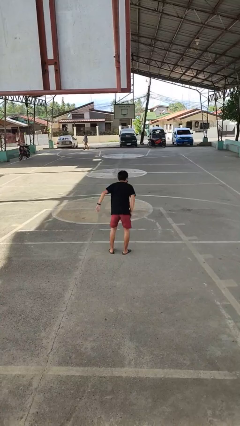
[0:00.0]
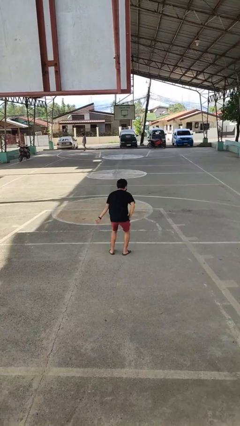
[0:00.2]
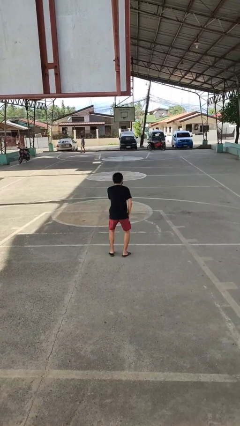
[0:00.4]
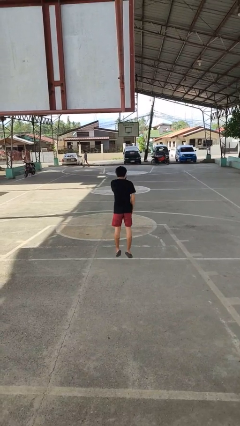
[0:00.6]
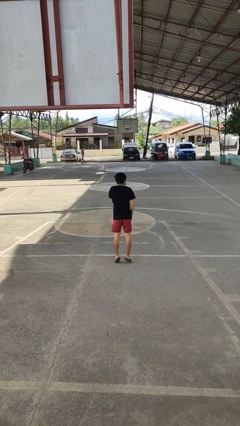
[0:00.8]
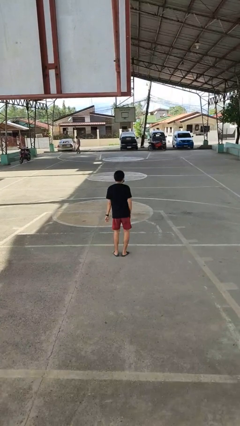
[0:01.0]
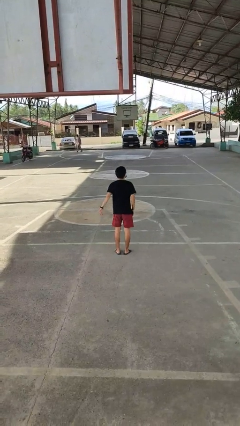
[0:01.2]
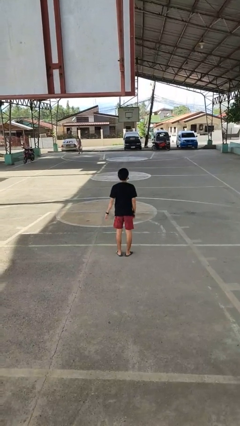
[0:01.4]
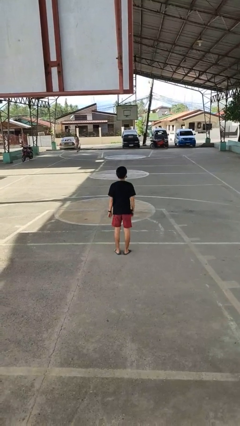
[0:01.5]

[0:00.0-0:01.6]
person jumps

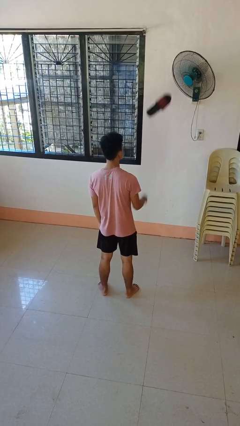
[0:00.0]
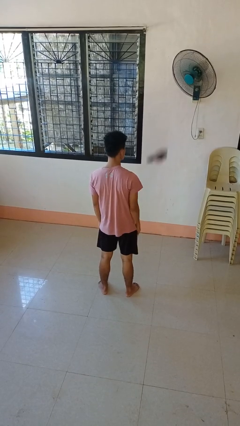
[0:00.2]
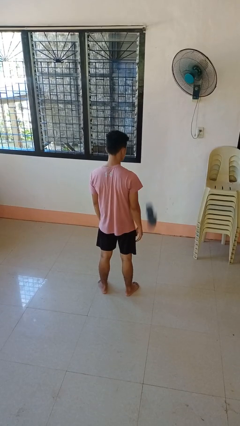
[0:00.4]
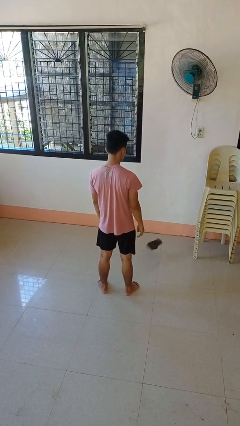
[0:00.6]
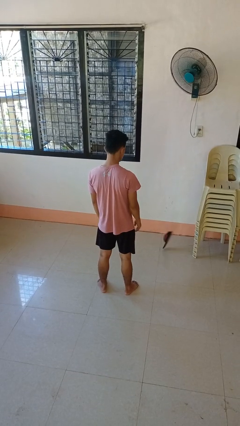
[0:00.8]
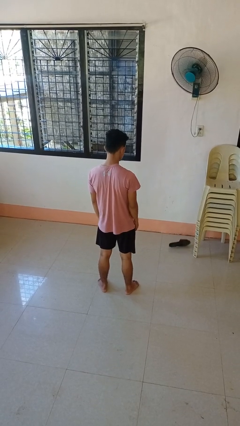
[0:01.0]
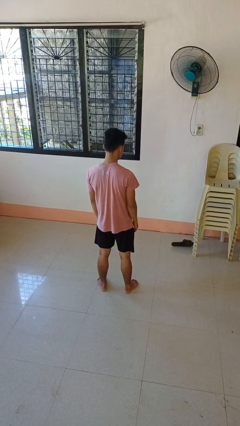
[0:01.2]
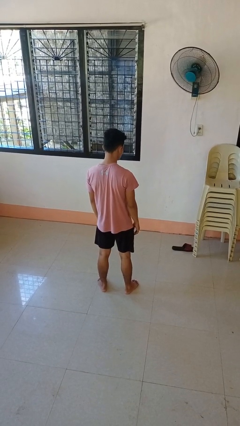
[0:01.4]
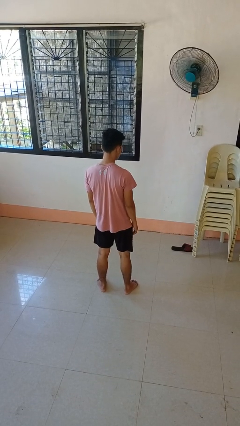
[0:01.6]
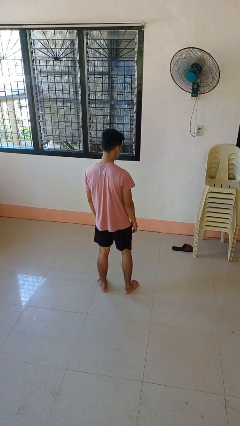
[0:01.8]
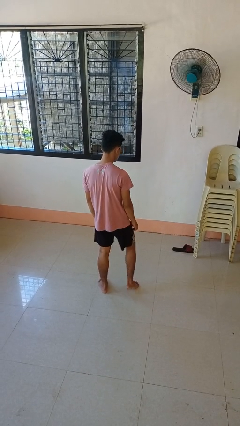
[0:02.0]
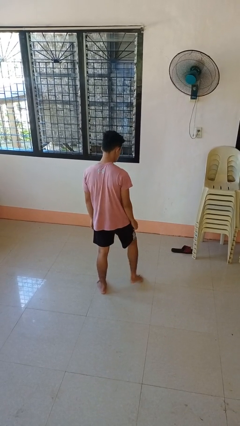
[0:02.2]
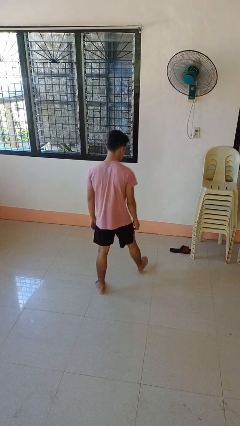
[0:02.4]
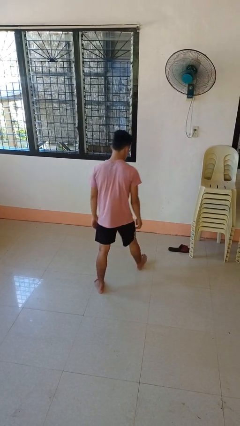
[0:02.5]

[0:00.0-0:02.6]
person throws object into air

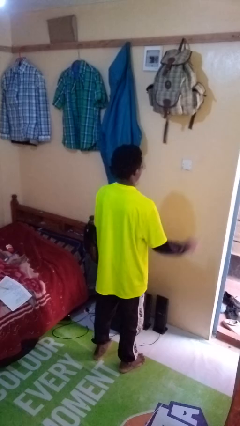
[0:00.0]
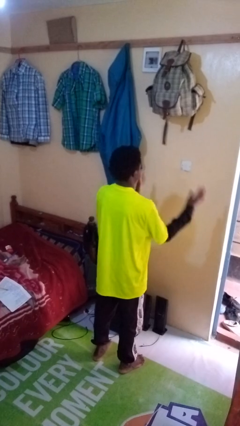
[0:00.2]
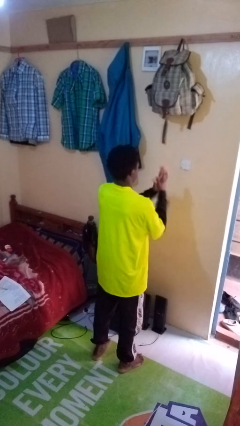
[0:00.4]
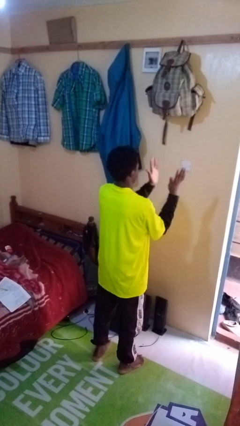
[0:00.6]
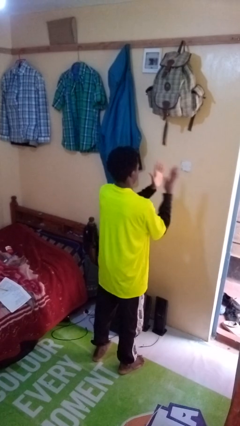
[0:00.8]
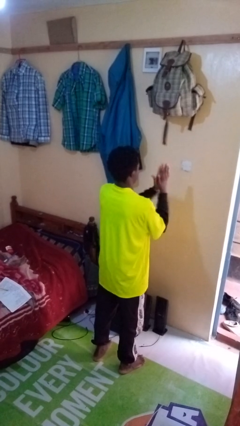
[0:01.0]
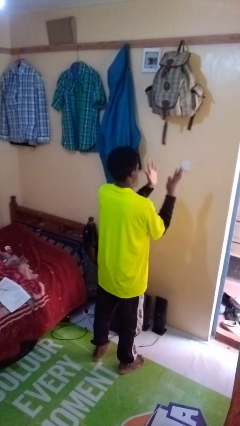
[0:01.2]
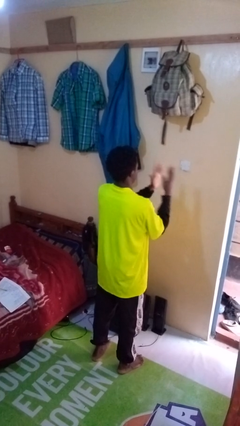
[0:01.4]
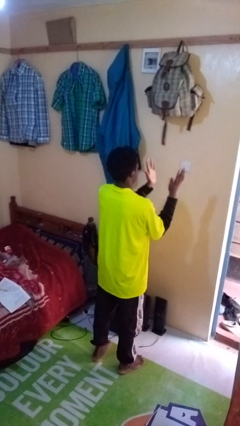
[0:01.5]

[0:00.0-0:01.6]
person claps hands

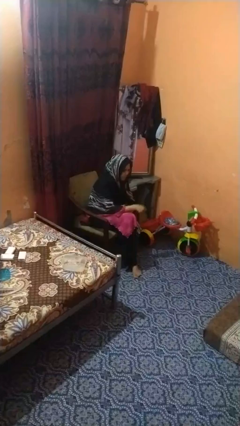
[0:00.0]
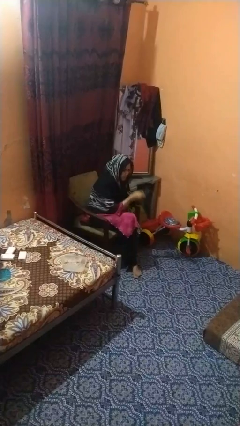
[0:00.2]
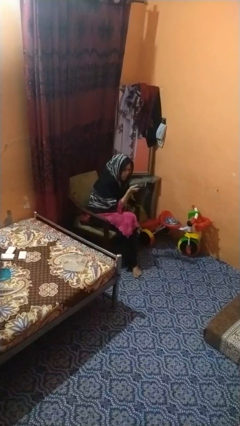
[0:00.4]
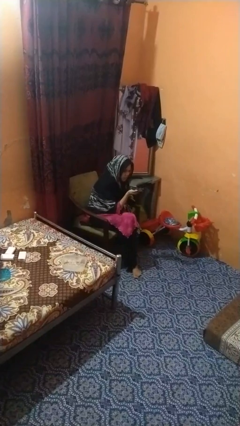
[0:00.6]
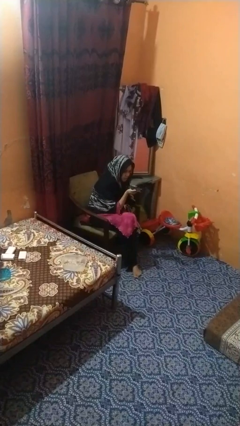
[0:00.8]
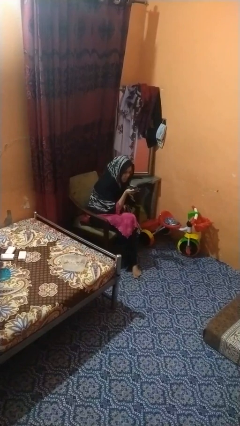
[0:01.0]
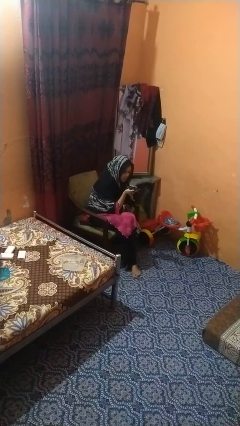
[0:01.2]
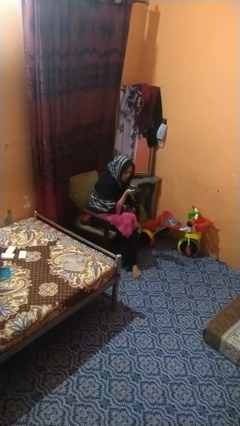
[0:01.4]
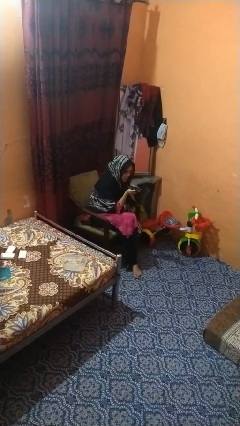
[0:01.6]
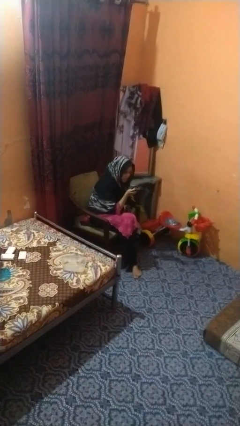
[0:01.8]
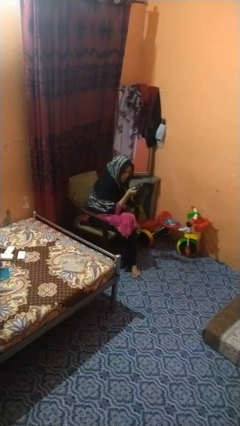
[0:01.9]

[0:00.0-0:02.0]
person uses television remote

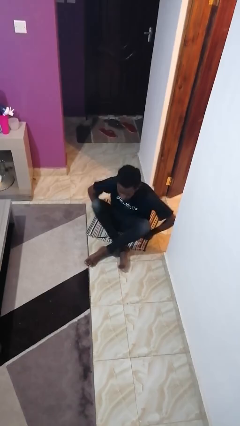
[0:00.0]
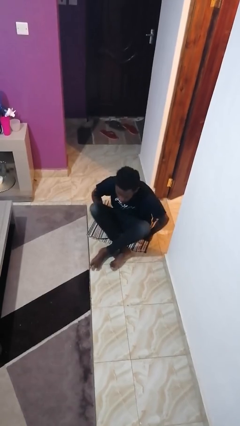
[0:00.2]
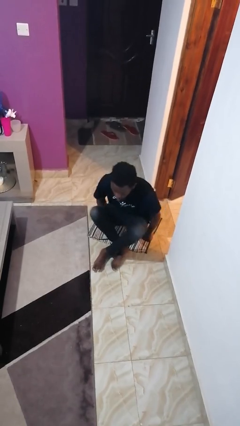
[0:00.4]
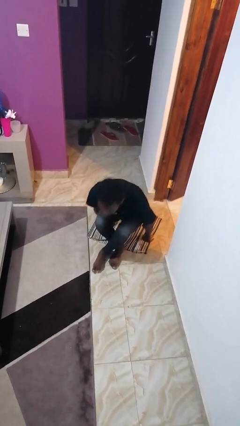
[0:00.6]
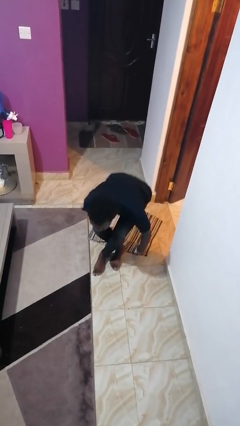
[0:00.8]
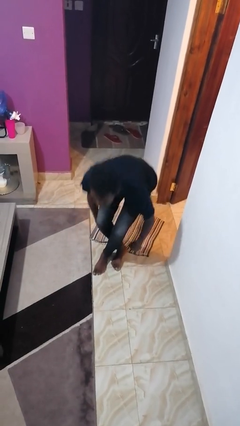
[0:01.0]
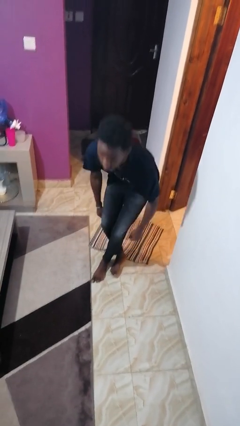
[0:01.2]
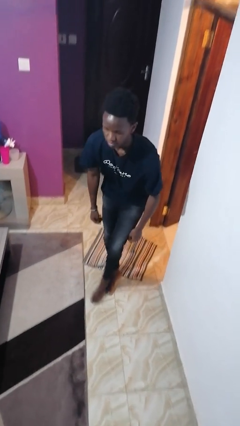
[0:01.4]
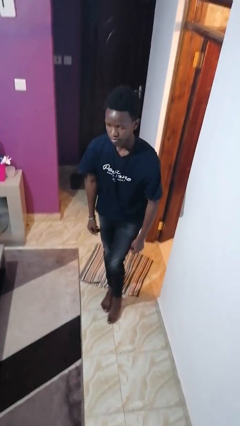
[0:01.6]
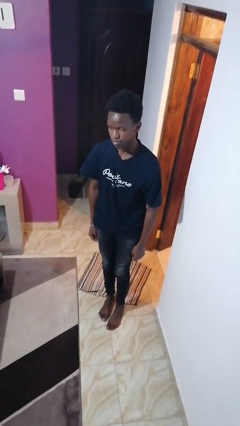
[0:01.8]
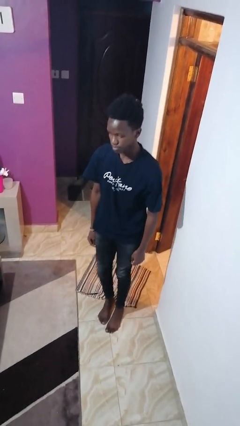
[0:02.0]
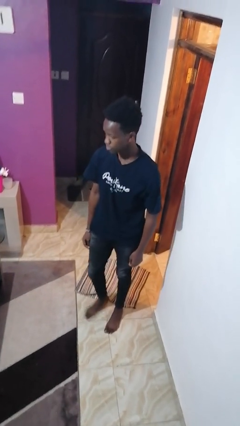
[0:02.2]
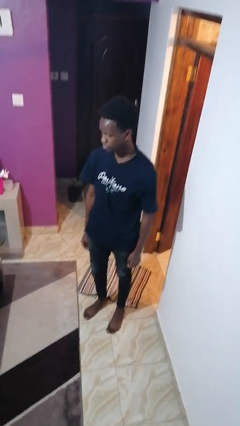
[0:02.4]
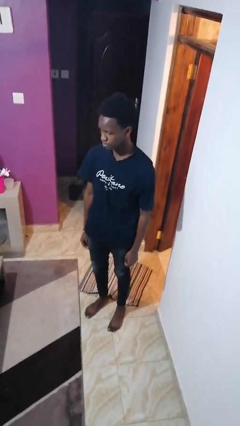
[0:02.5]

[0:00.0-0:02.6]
person stands up from floor

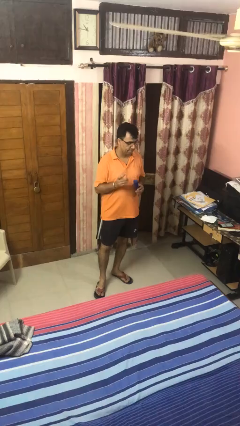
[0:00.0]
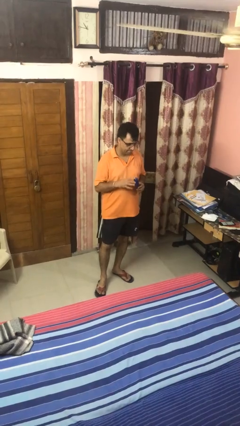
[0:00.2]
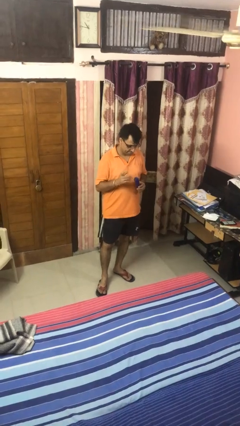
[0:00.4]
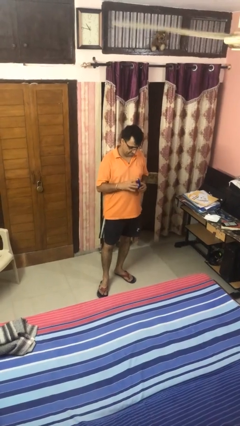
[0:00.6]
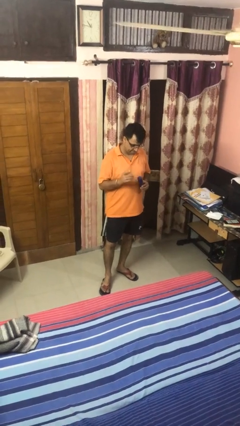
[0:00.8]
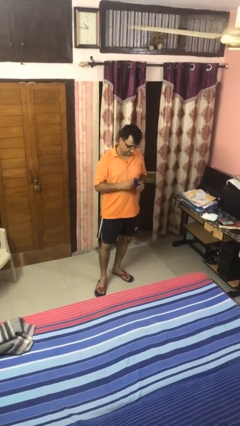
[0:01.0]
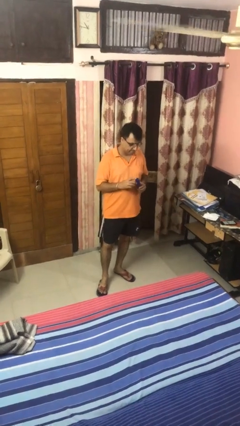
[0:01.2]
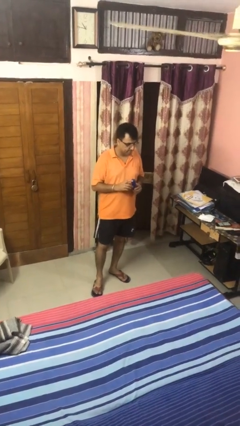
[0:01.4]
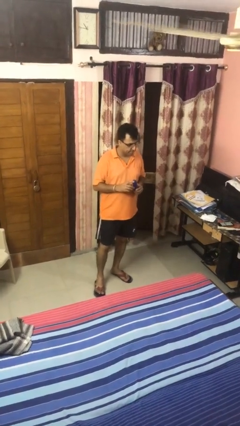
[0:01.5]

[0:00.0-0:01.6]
person taps object with finger

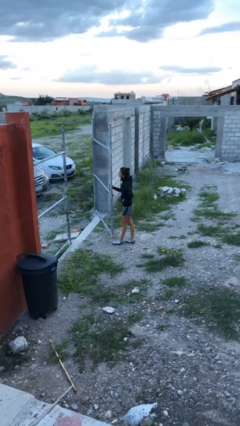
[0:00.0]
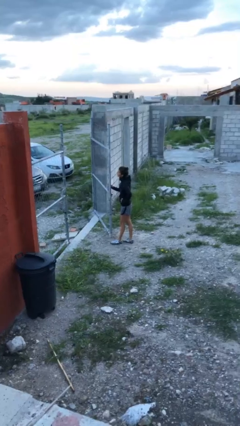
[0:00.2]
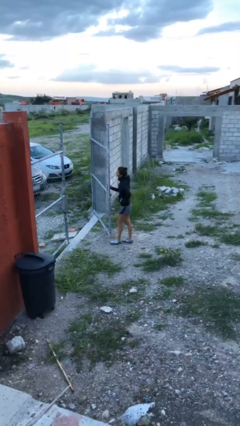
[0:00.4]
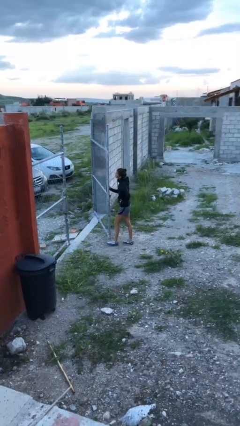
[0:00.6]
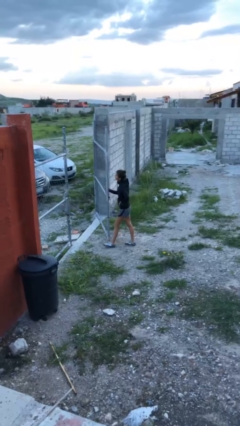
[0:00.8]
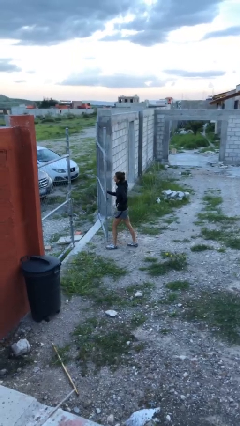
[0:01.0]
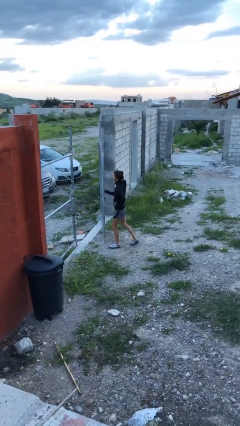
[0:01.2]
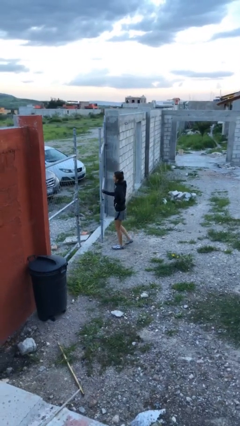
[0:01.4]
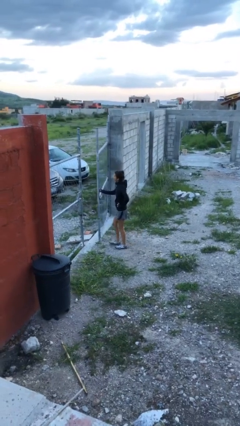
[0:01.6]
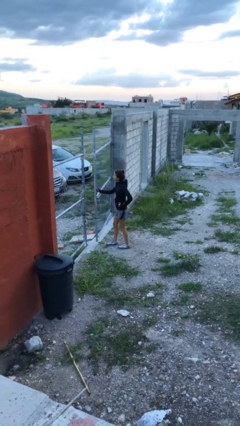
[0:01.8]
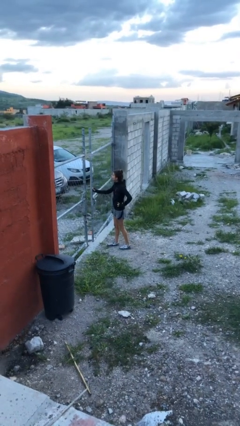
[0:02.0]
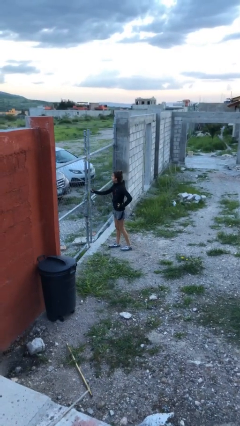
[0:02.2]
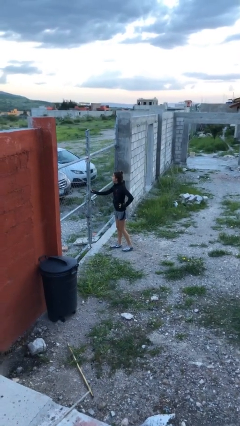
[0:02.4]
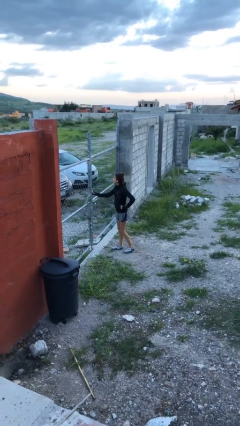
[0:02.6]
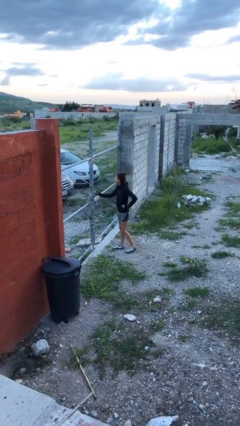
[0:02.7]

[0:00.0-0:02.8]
person closes gate

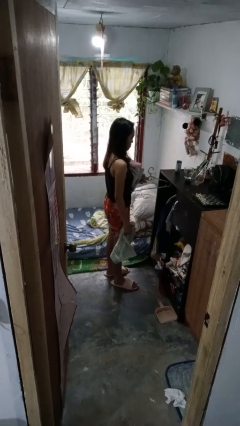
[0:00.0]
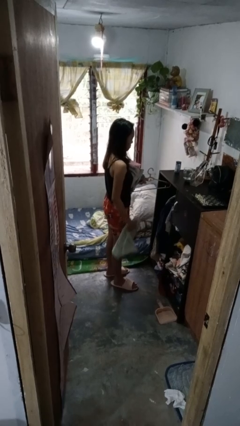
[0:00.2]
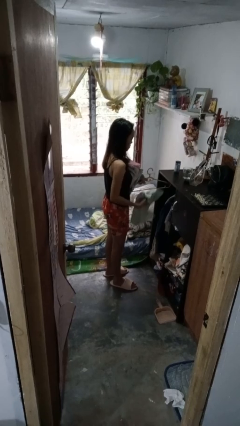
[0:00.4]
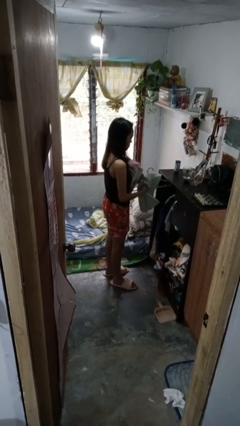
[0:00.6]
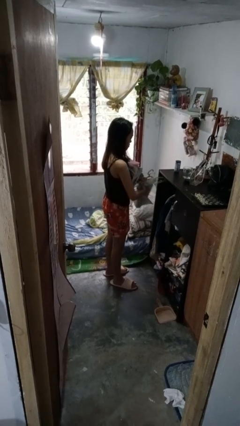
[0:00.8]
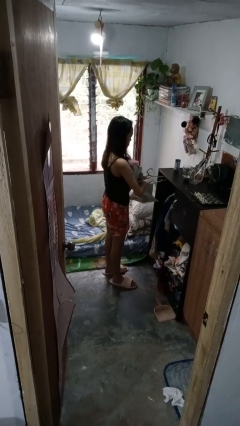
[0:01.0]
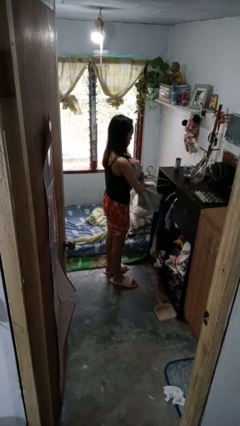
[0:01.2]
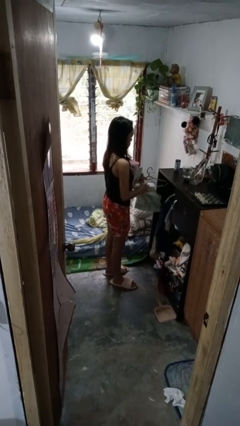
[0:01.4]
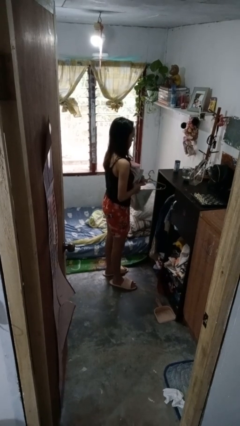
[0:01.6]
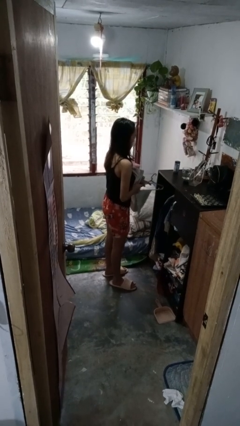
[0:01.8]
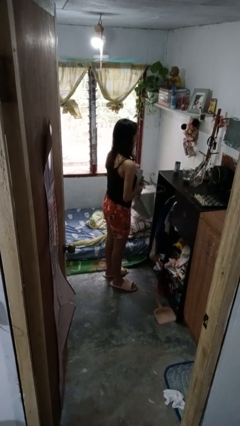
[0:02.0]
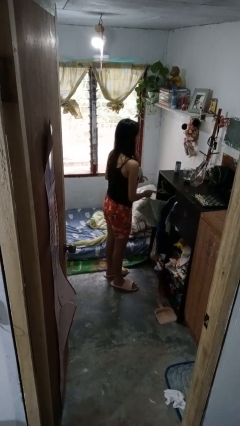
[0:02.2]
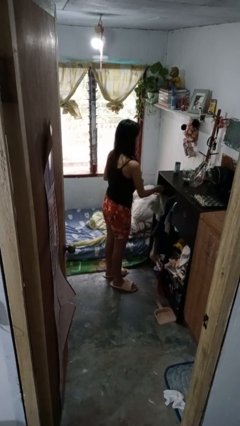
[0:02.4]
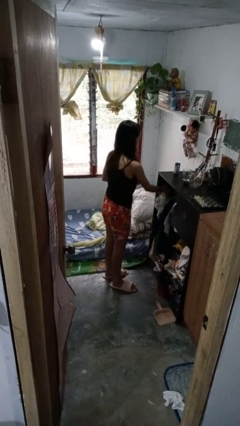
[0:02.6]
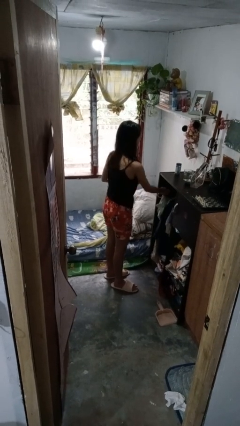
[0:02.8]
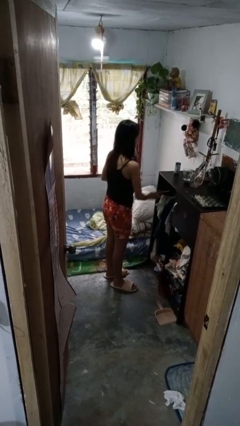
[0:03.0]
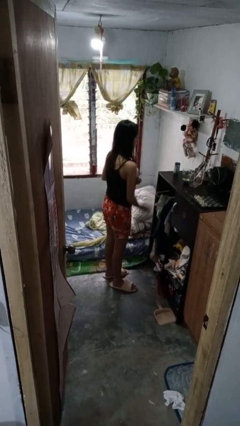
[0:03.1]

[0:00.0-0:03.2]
person puts clothes into closet